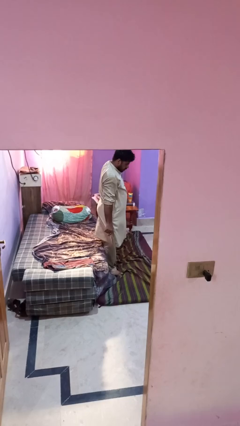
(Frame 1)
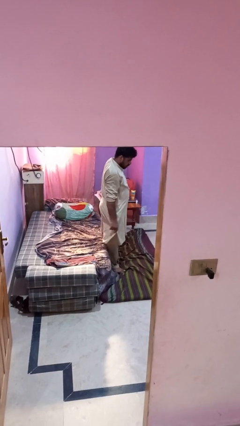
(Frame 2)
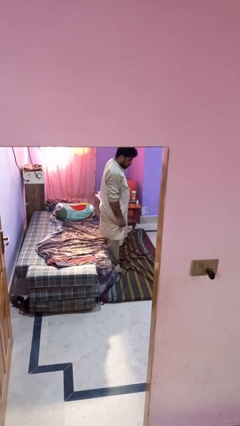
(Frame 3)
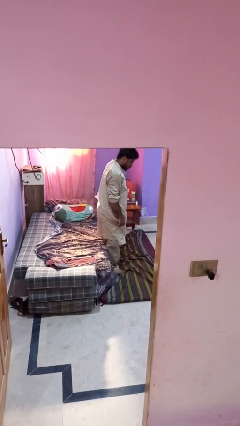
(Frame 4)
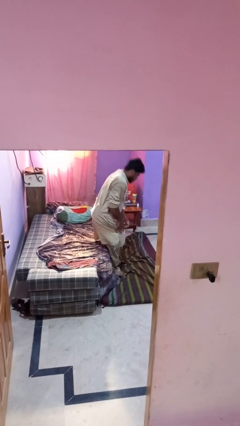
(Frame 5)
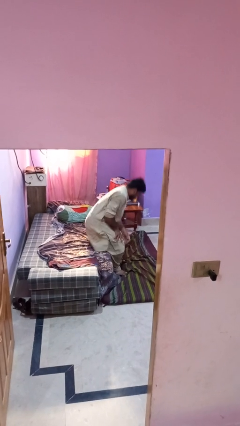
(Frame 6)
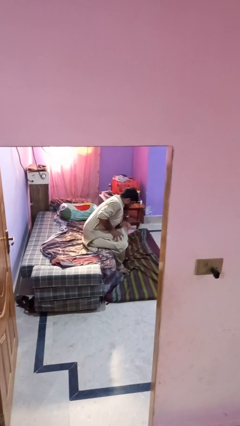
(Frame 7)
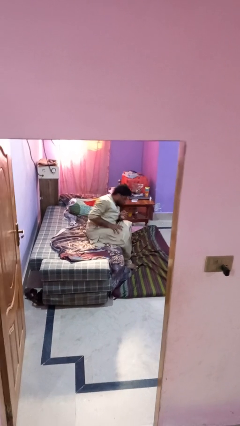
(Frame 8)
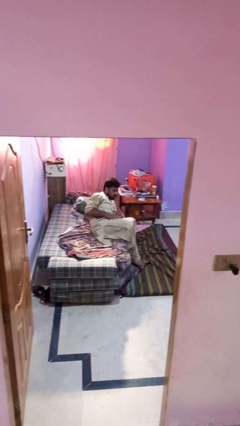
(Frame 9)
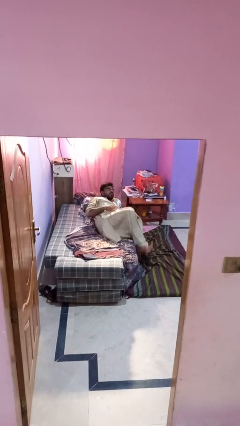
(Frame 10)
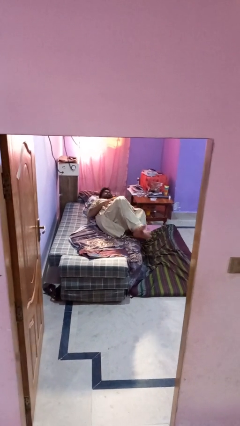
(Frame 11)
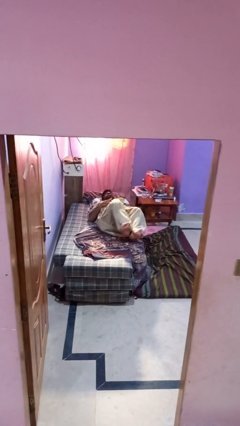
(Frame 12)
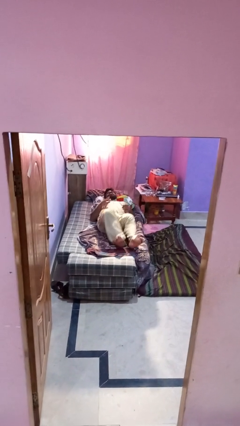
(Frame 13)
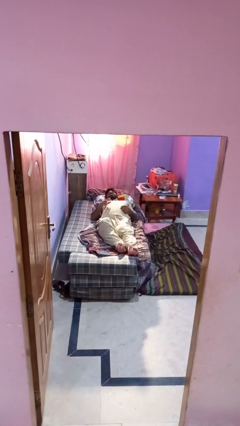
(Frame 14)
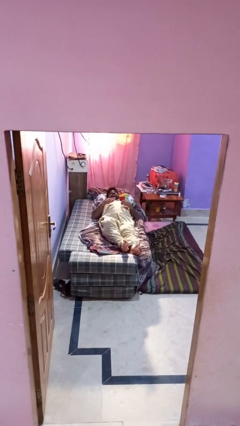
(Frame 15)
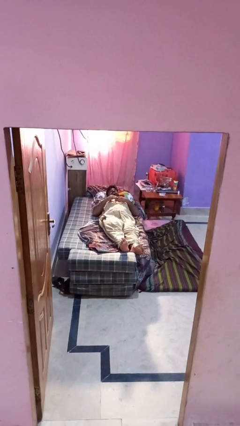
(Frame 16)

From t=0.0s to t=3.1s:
person lies down on bed

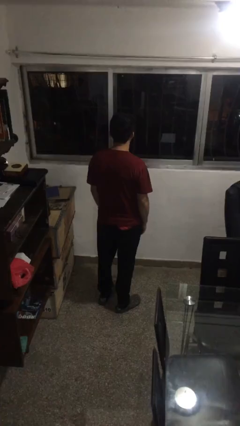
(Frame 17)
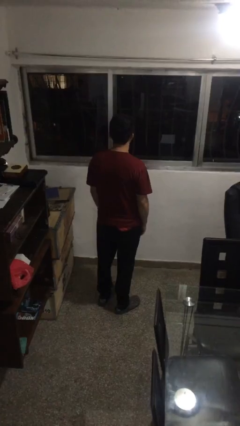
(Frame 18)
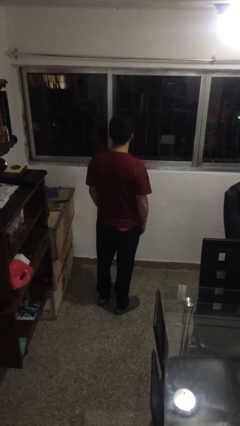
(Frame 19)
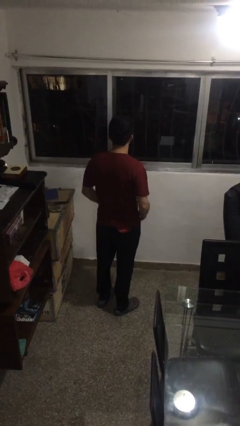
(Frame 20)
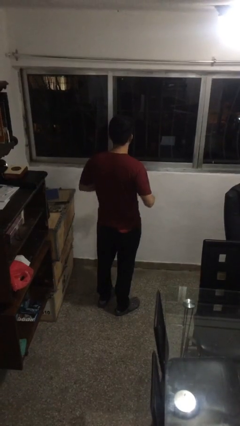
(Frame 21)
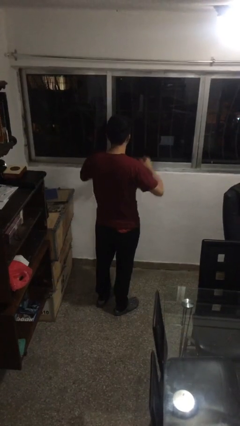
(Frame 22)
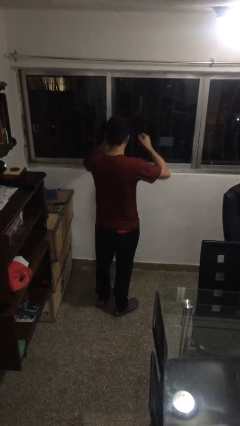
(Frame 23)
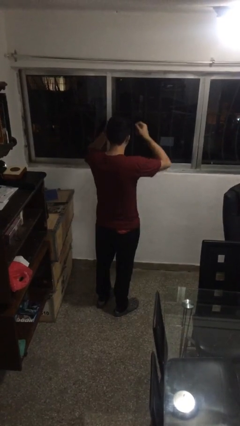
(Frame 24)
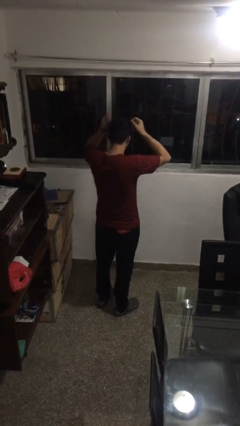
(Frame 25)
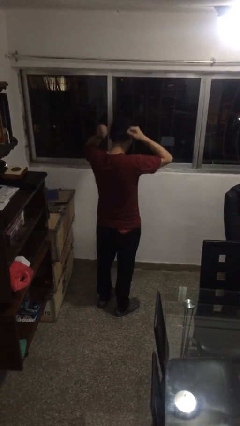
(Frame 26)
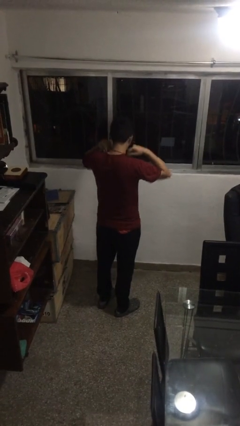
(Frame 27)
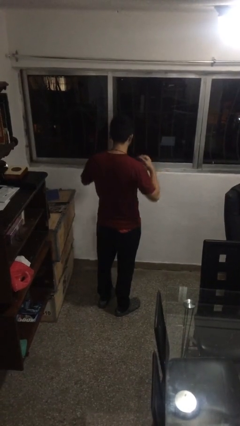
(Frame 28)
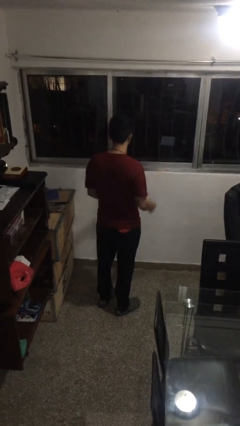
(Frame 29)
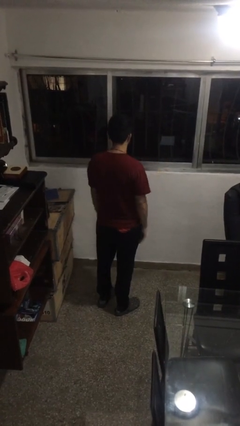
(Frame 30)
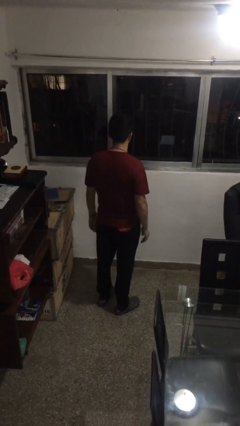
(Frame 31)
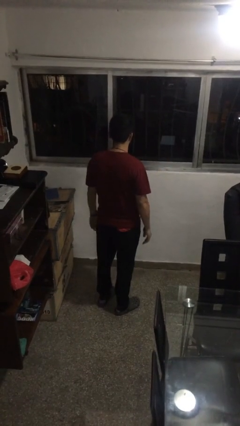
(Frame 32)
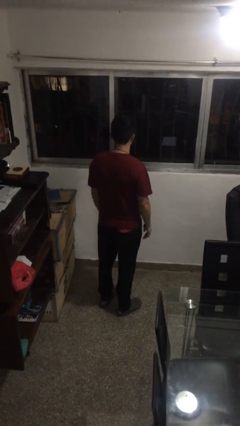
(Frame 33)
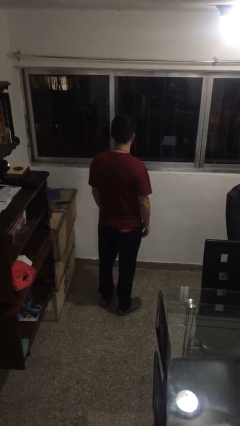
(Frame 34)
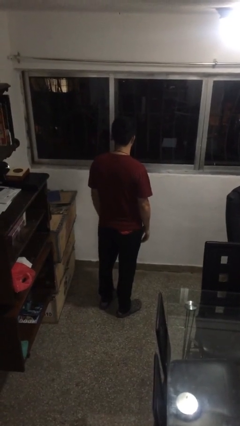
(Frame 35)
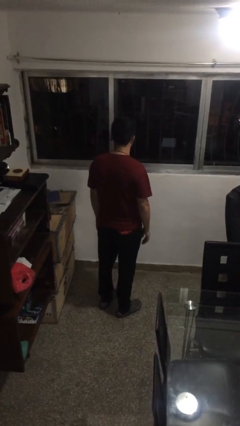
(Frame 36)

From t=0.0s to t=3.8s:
person puts on necklace

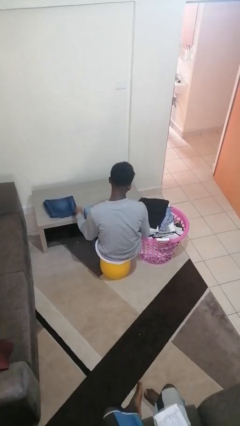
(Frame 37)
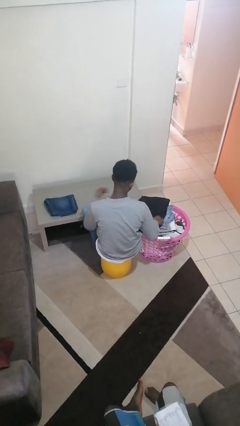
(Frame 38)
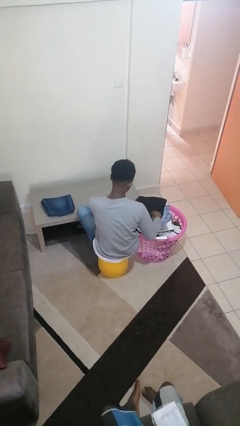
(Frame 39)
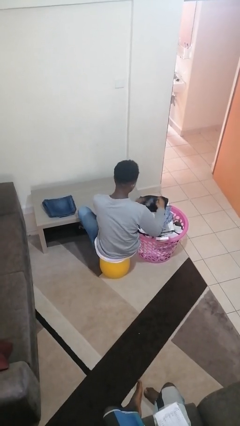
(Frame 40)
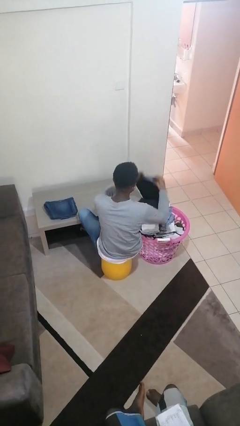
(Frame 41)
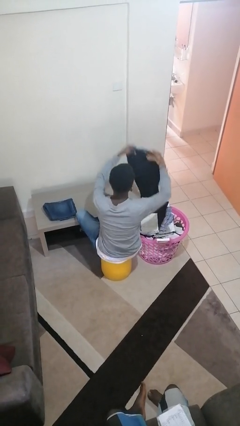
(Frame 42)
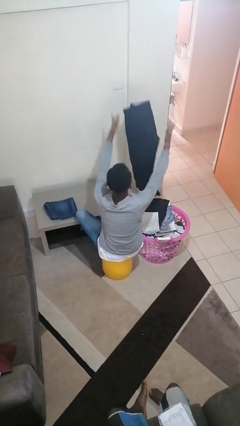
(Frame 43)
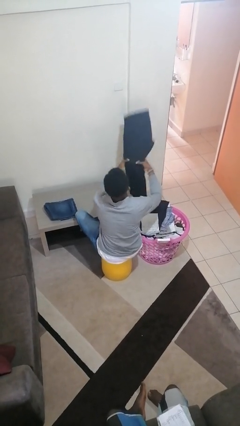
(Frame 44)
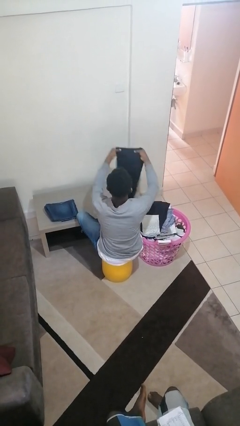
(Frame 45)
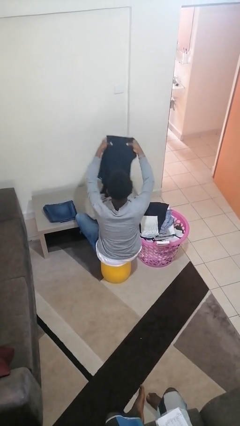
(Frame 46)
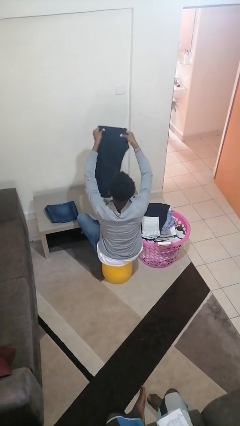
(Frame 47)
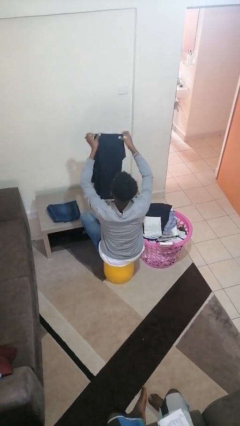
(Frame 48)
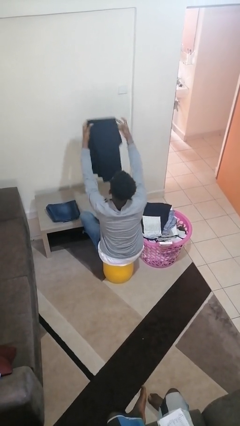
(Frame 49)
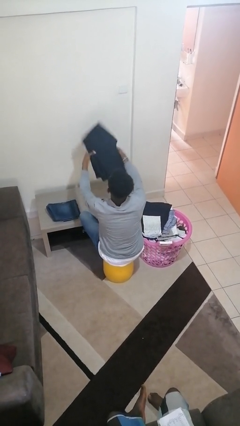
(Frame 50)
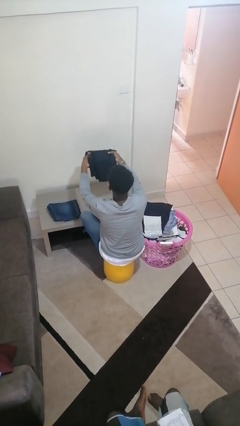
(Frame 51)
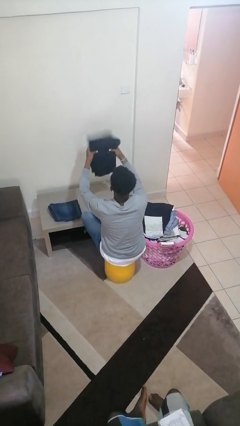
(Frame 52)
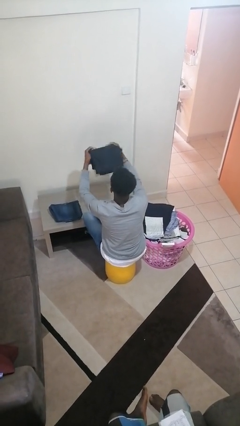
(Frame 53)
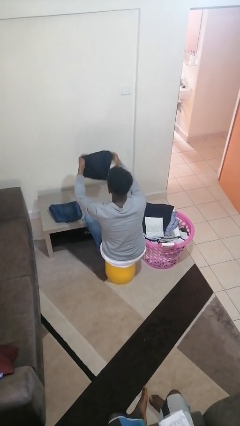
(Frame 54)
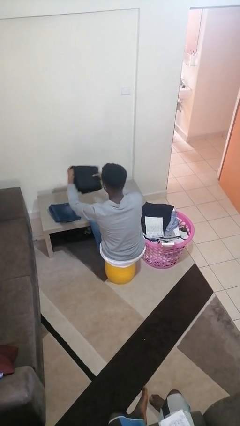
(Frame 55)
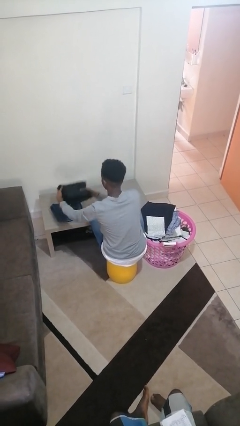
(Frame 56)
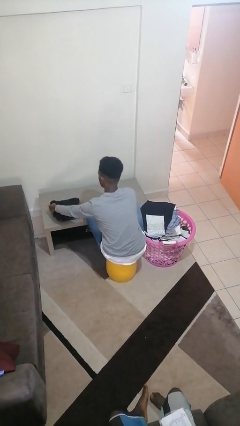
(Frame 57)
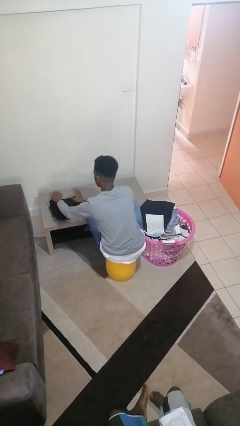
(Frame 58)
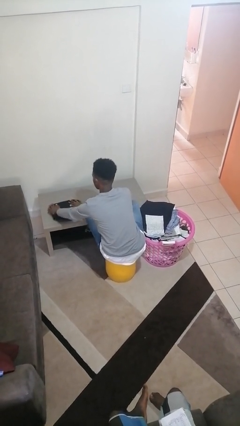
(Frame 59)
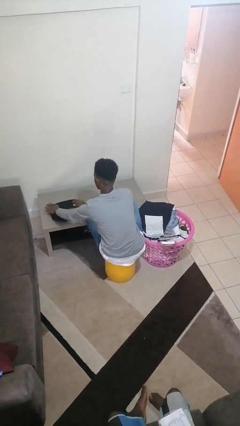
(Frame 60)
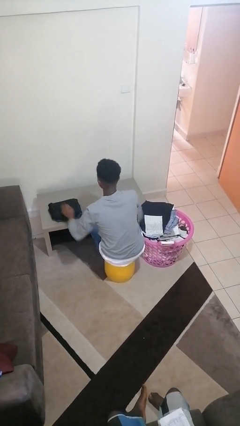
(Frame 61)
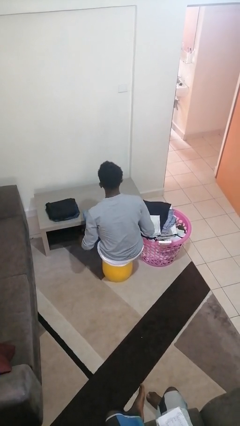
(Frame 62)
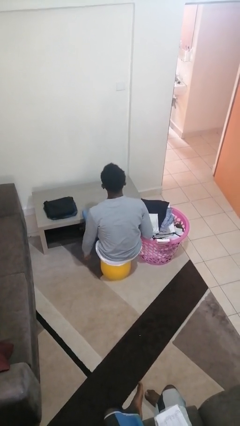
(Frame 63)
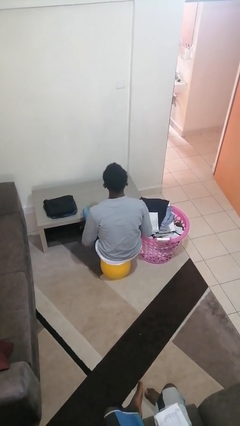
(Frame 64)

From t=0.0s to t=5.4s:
person folds pants

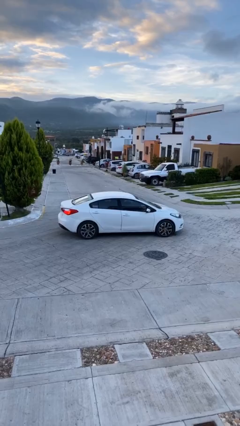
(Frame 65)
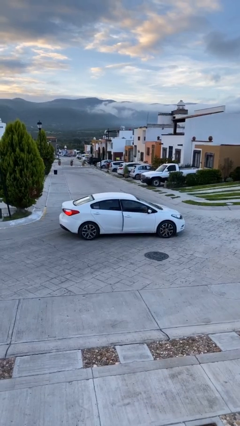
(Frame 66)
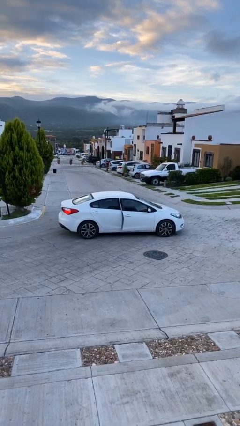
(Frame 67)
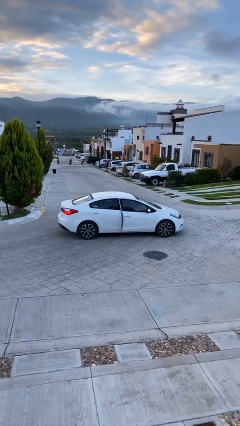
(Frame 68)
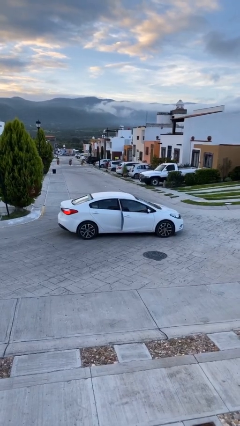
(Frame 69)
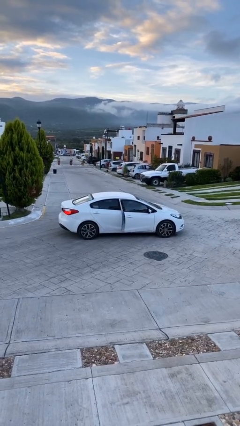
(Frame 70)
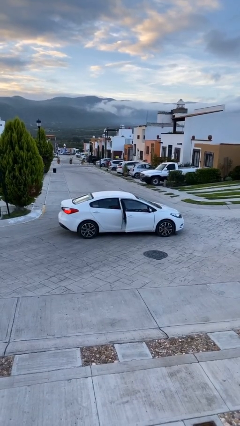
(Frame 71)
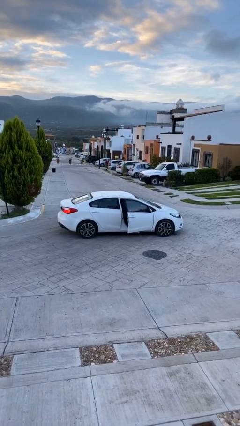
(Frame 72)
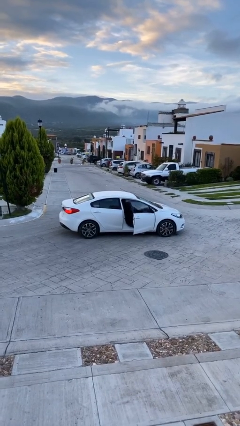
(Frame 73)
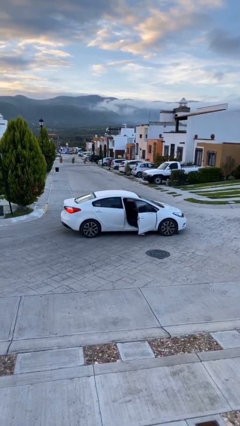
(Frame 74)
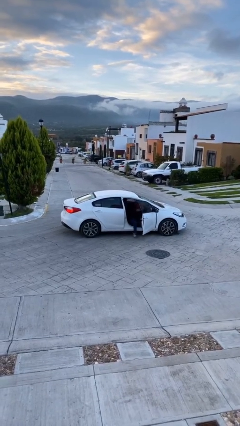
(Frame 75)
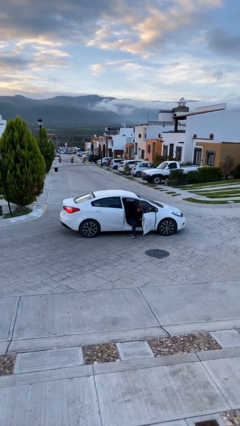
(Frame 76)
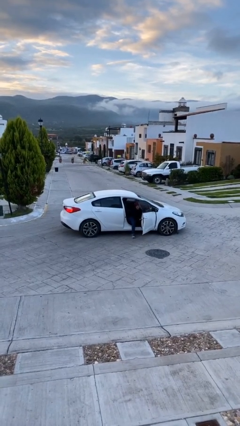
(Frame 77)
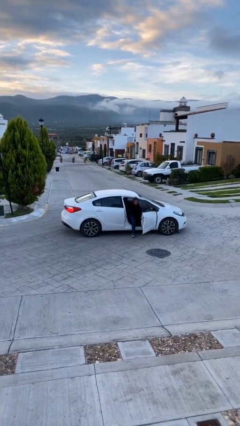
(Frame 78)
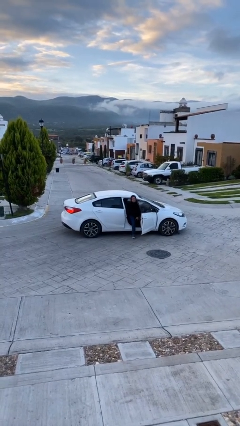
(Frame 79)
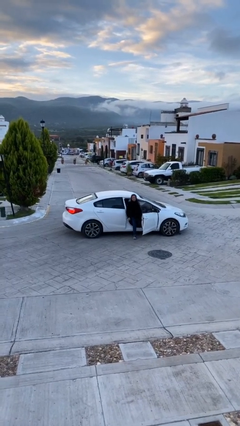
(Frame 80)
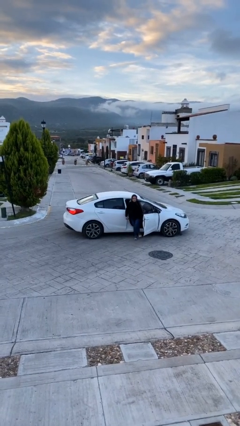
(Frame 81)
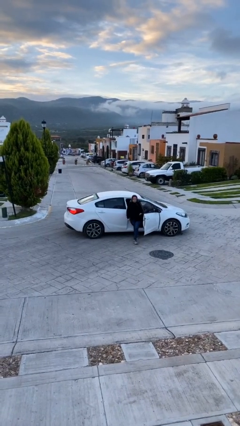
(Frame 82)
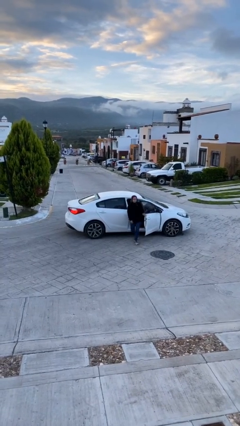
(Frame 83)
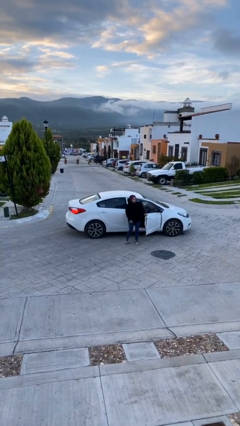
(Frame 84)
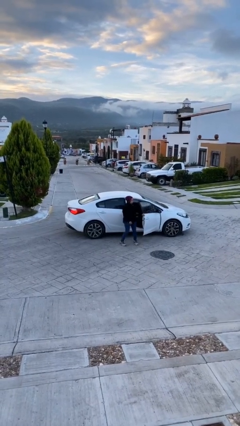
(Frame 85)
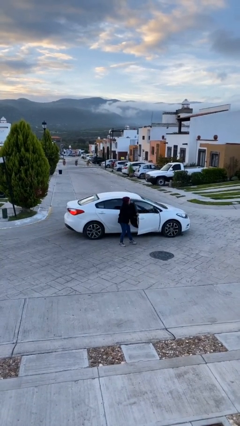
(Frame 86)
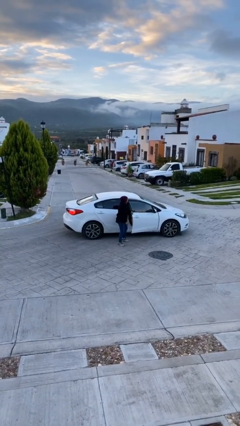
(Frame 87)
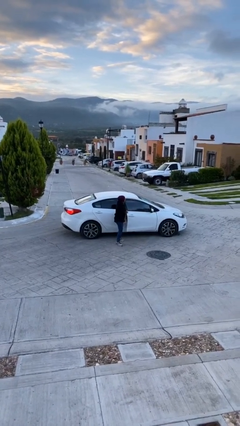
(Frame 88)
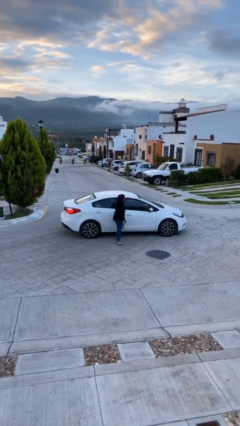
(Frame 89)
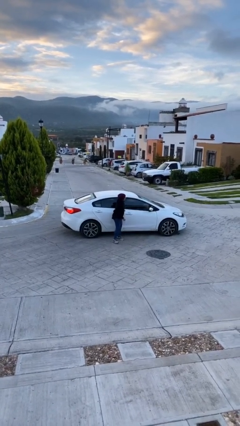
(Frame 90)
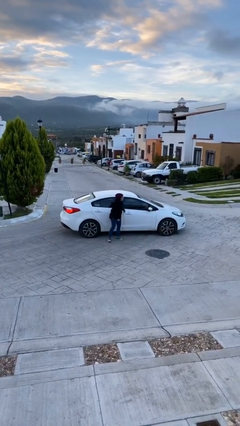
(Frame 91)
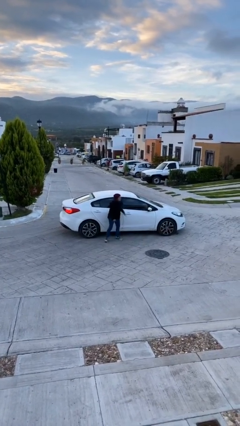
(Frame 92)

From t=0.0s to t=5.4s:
car drops off person

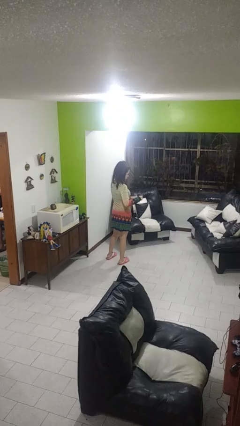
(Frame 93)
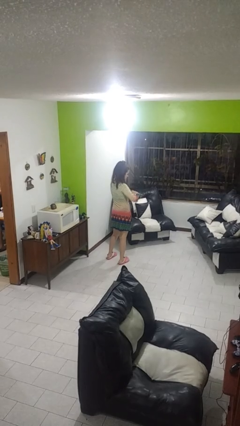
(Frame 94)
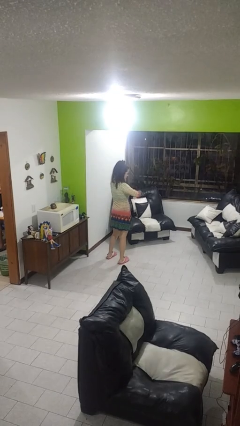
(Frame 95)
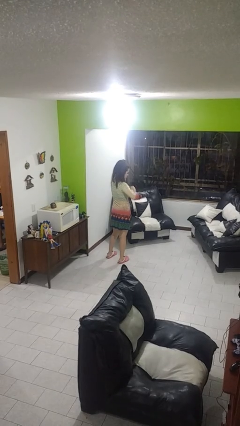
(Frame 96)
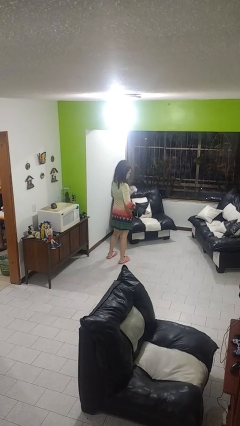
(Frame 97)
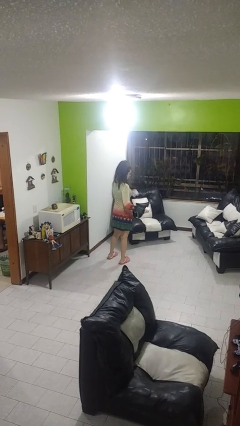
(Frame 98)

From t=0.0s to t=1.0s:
person tears paper
